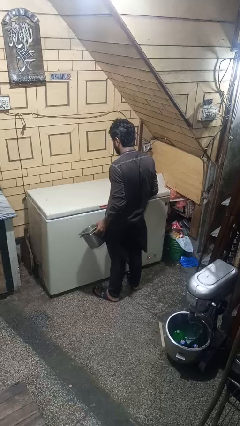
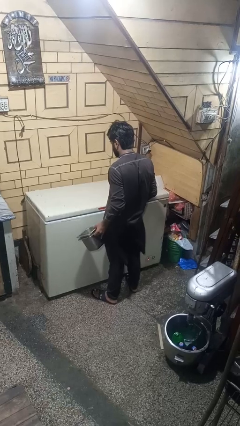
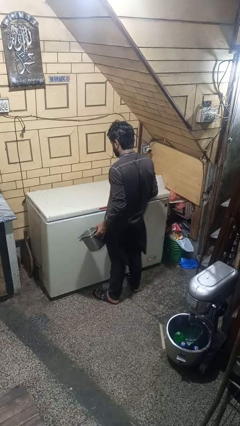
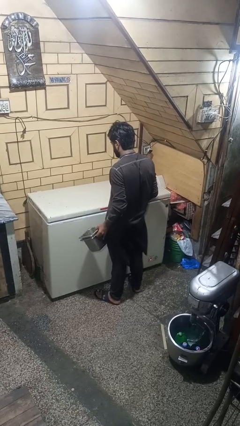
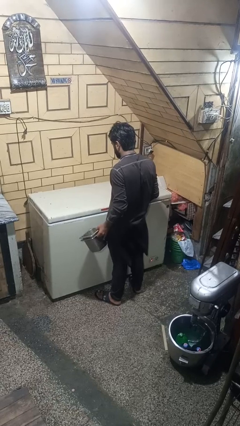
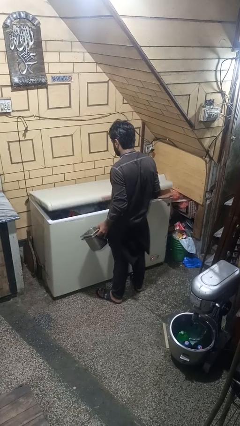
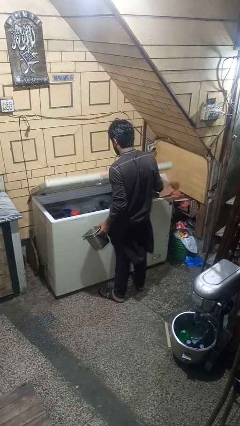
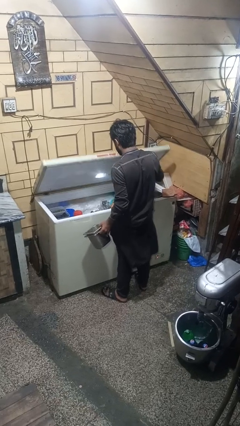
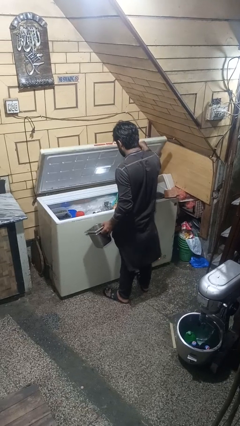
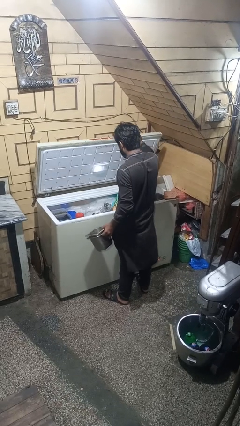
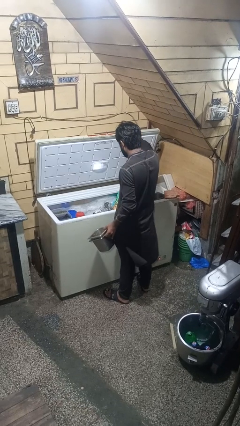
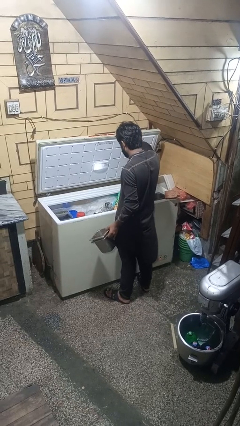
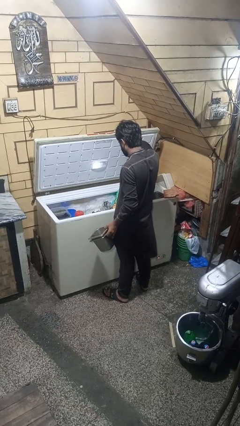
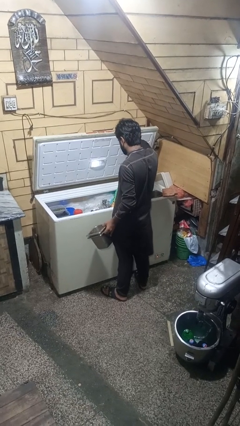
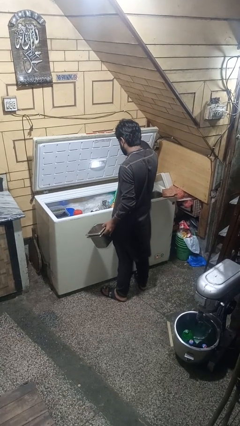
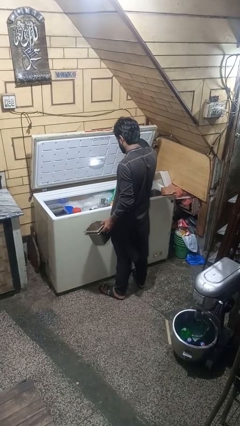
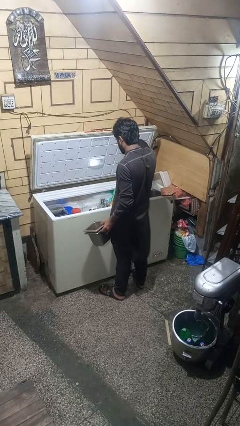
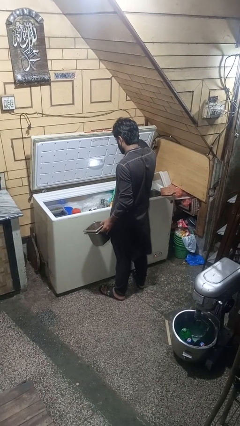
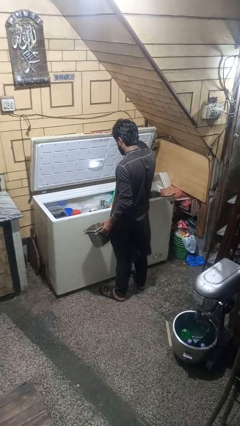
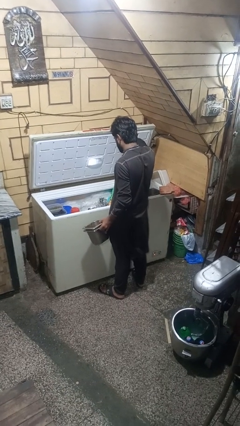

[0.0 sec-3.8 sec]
person opens refrigerator

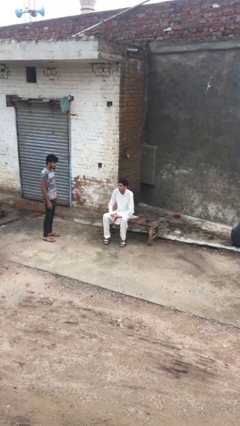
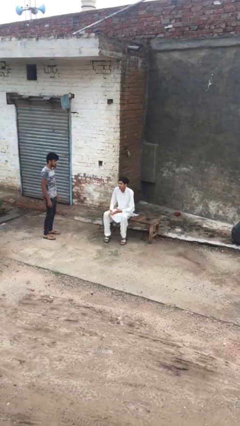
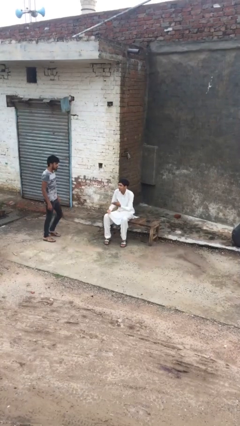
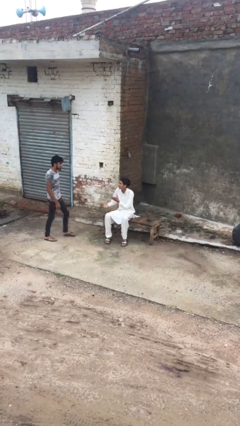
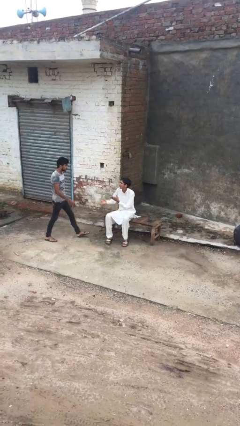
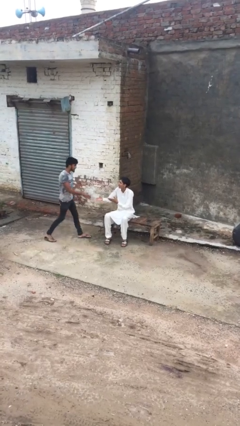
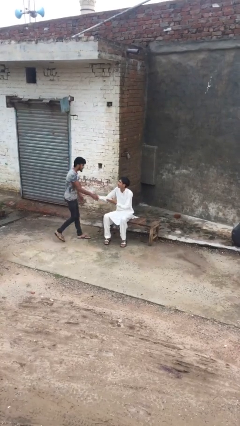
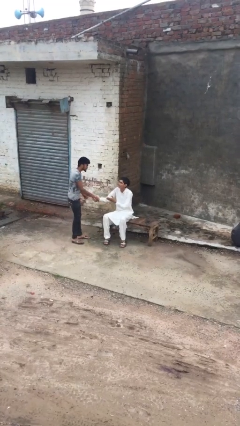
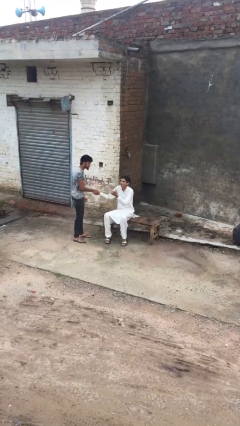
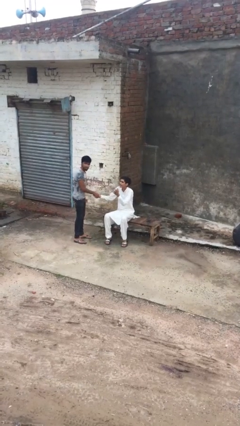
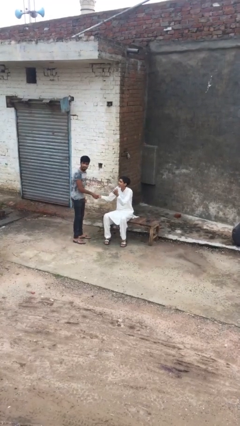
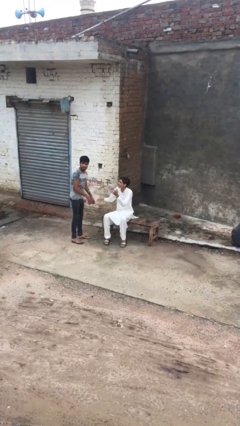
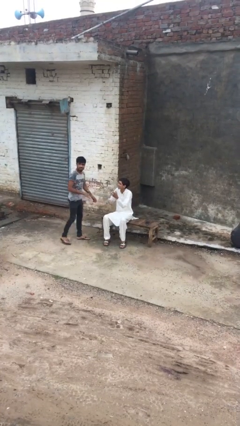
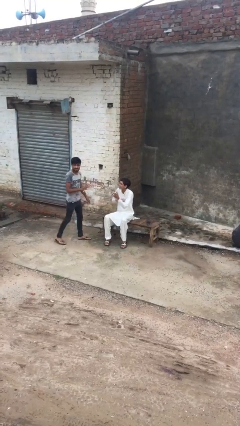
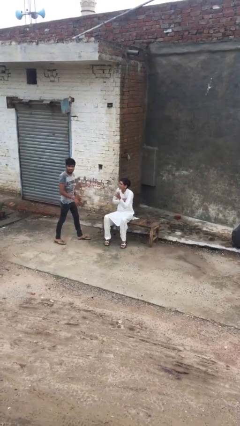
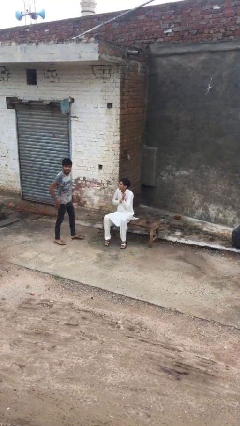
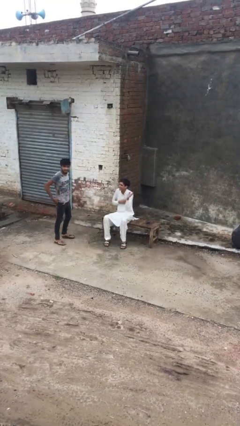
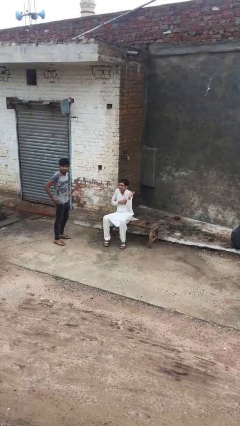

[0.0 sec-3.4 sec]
person shakes hand

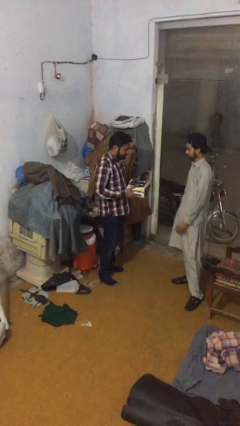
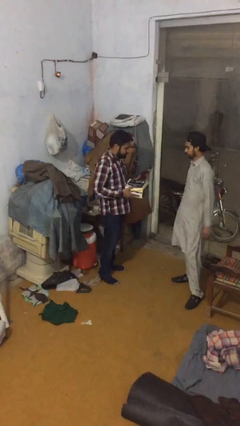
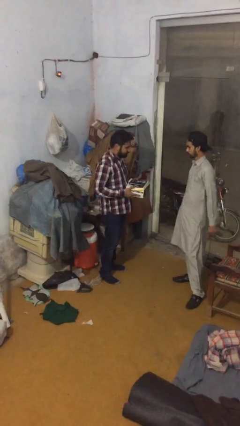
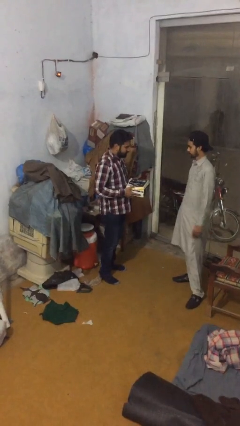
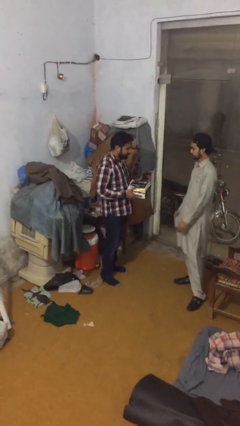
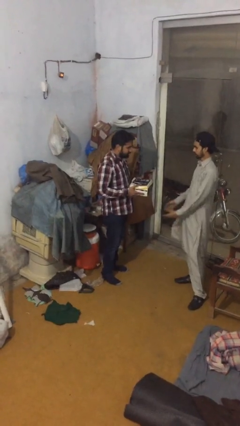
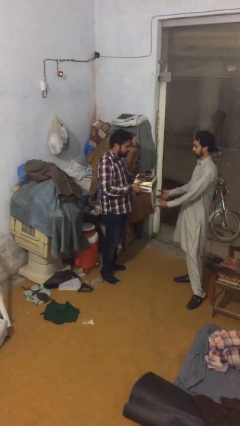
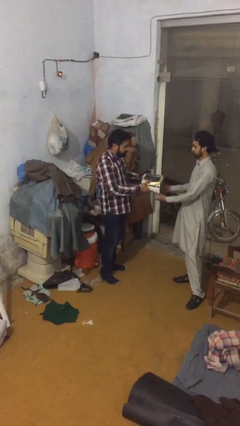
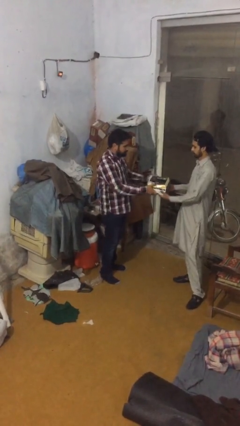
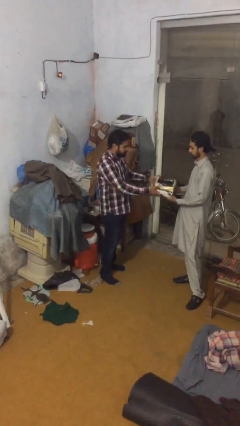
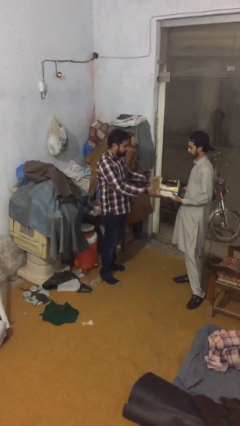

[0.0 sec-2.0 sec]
person transfers object to person

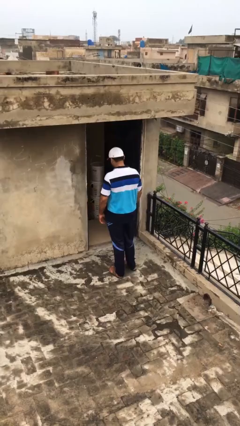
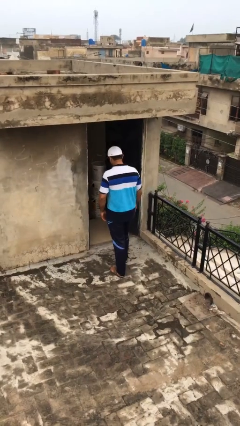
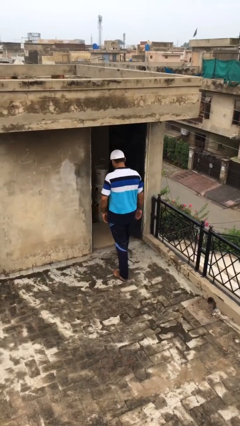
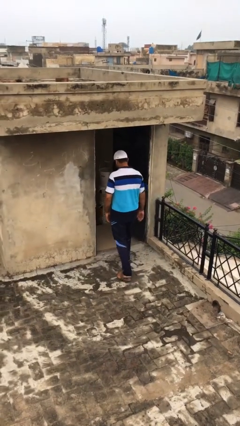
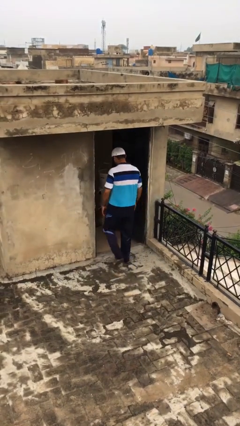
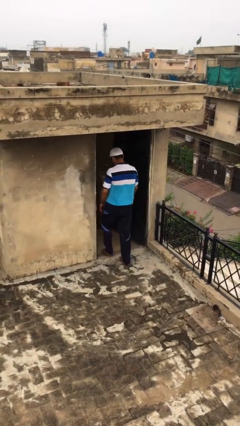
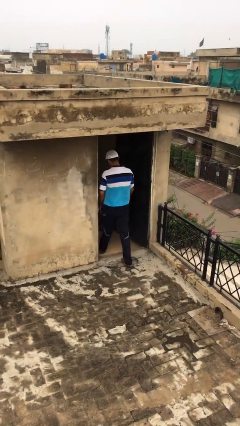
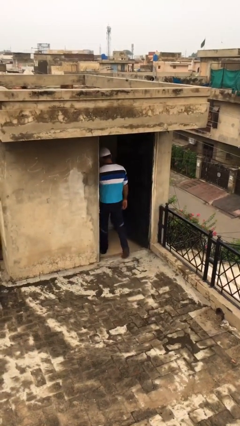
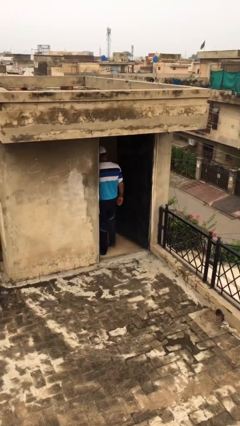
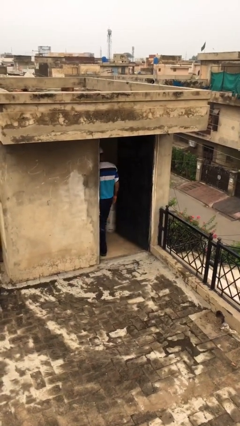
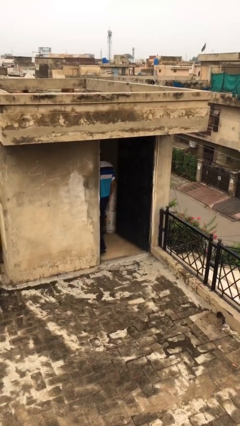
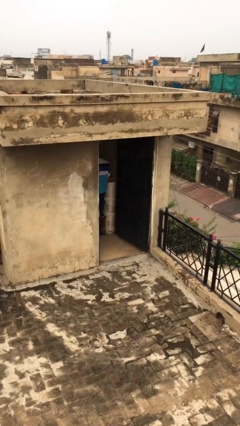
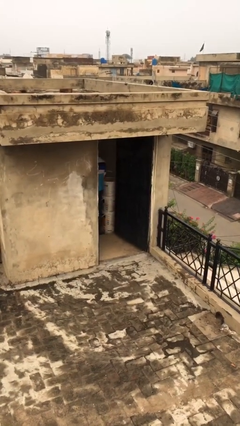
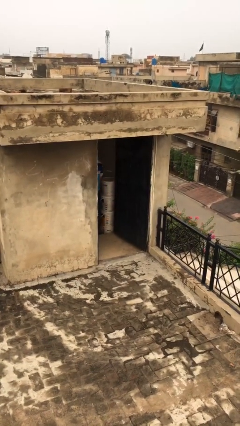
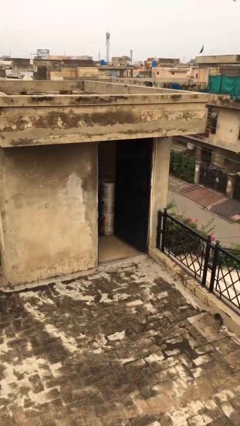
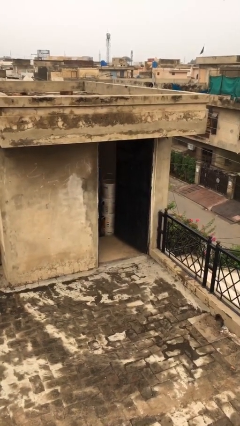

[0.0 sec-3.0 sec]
person exits scene through structure

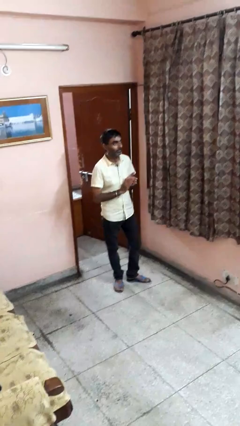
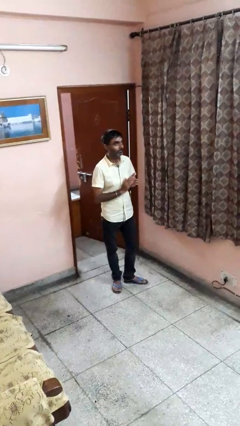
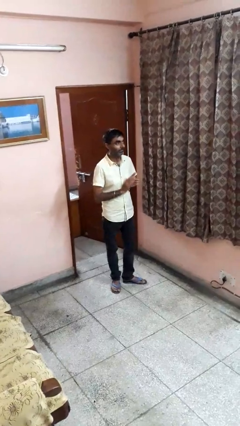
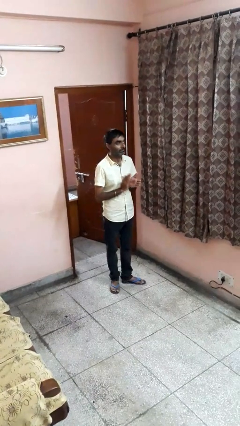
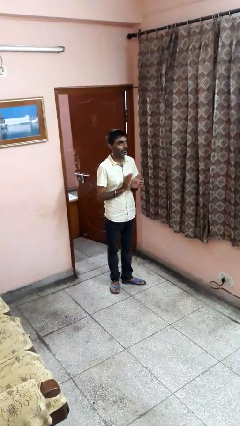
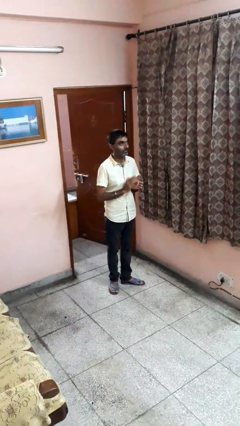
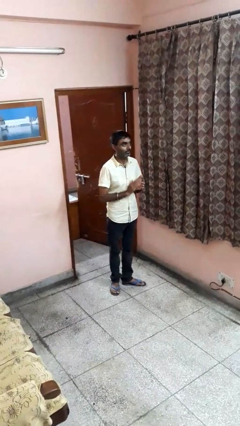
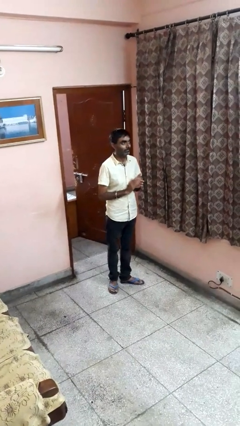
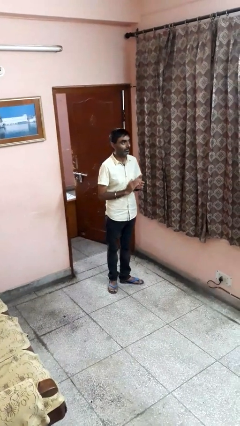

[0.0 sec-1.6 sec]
person claps hands

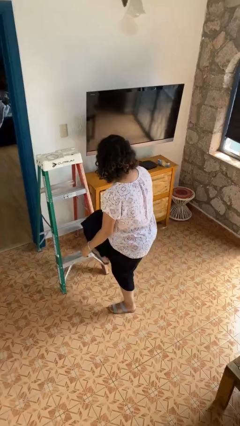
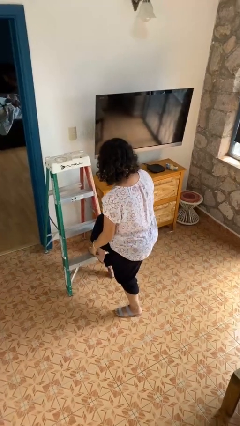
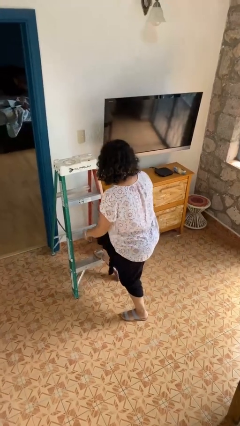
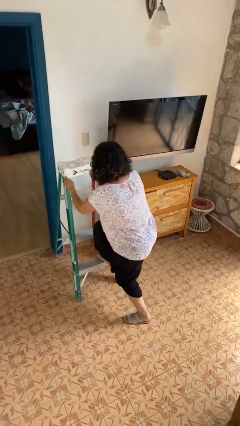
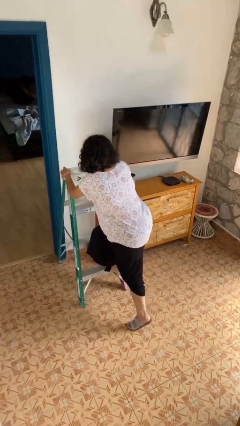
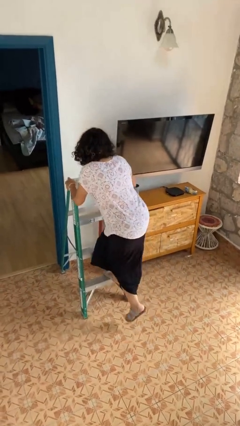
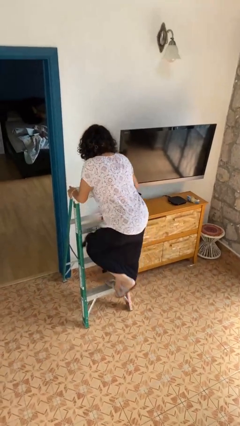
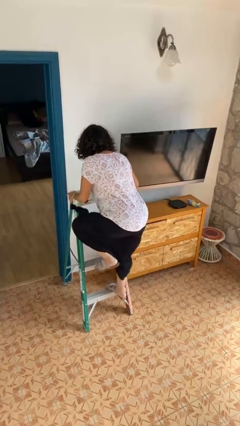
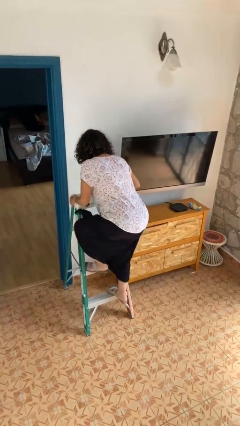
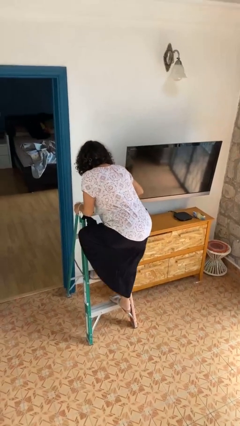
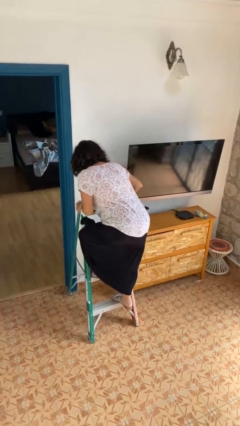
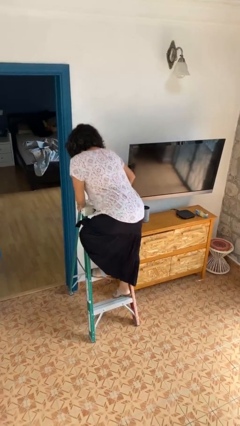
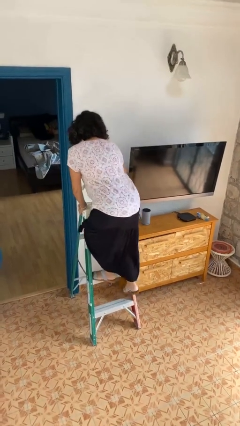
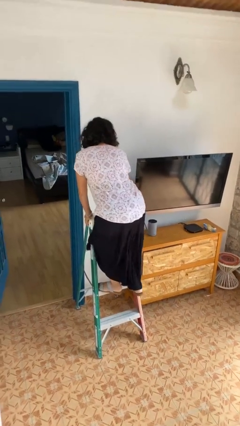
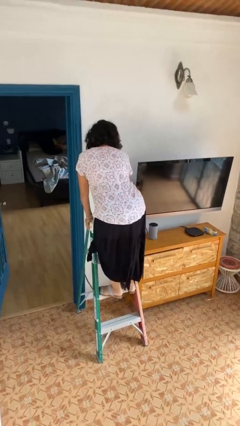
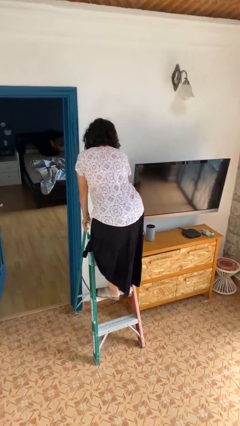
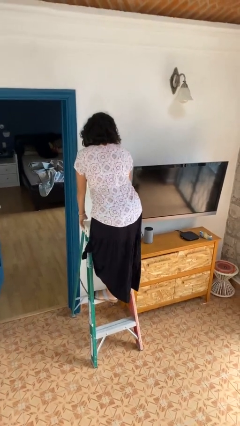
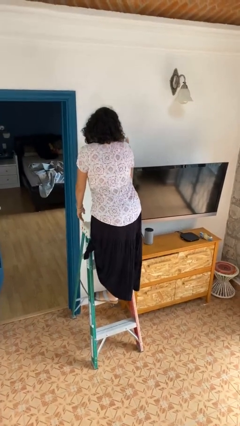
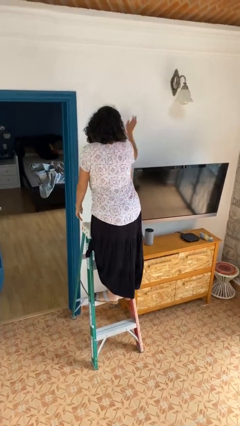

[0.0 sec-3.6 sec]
person climbs up ladder
